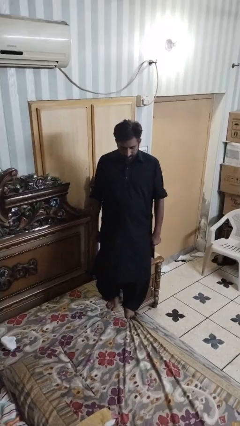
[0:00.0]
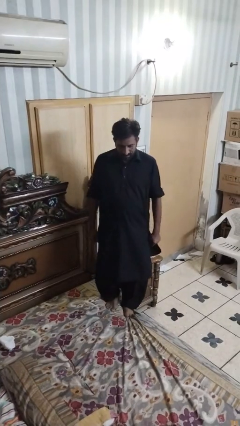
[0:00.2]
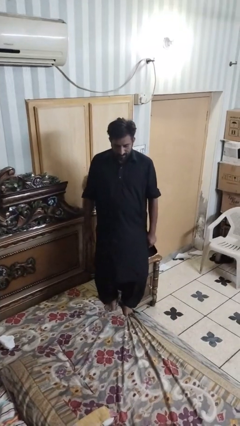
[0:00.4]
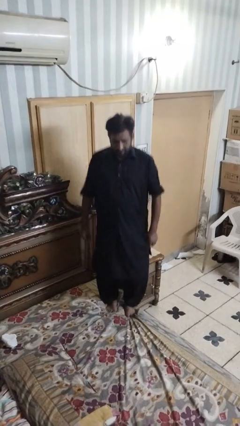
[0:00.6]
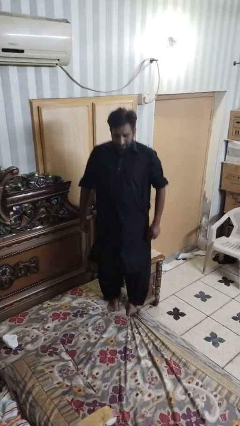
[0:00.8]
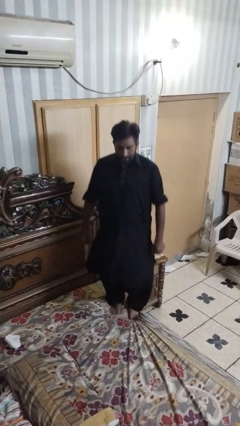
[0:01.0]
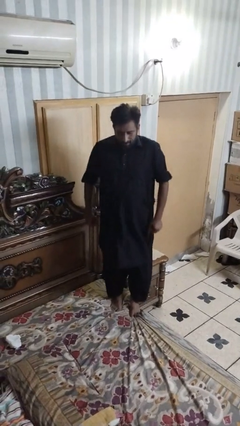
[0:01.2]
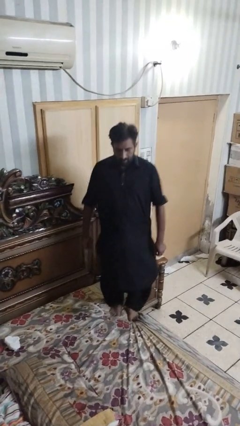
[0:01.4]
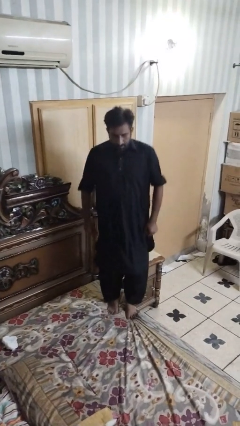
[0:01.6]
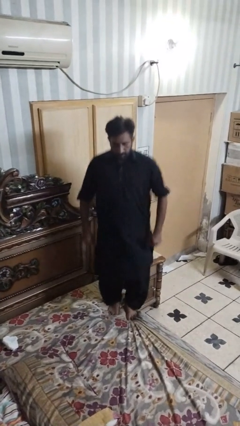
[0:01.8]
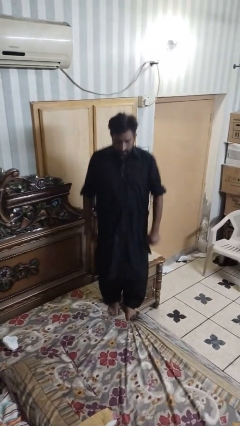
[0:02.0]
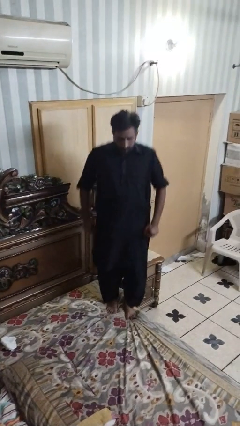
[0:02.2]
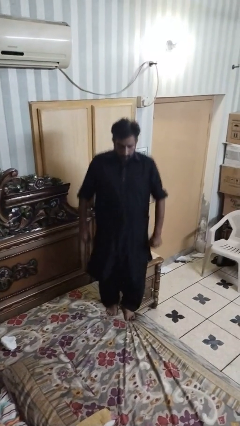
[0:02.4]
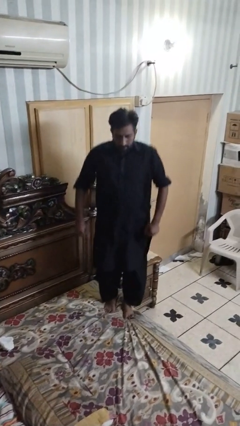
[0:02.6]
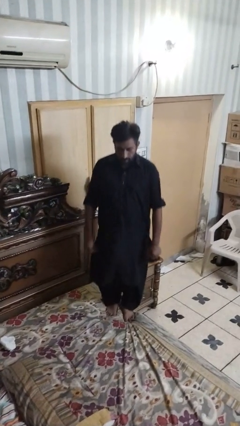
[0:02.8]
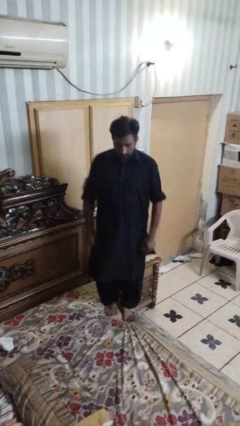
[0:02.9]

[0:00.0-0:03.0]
person jumps on bed

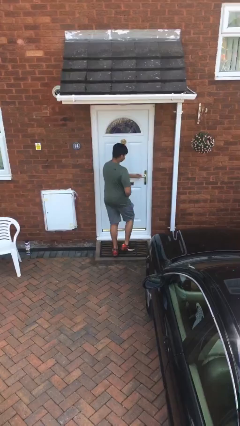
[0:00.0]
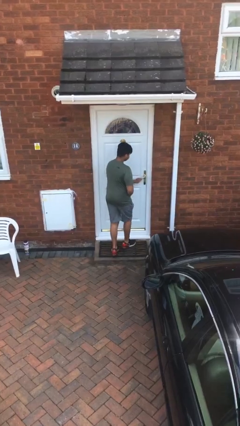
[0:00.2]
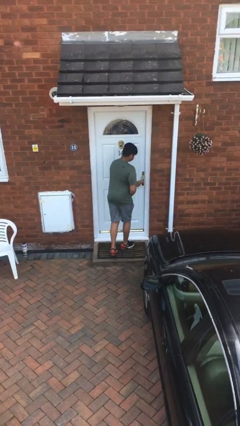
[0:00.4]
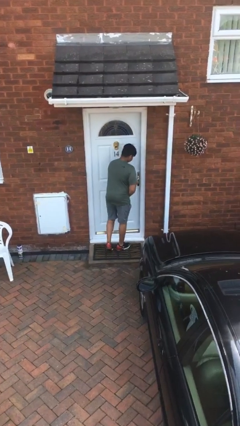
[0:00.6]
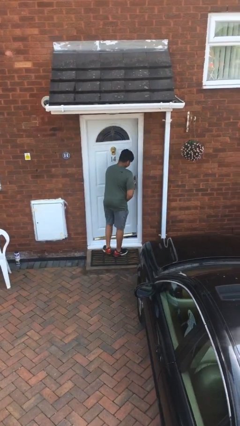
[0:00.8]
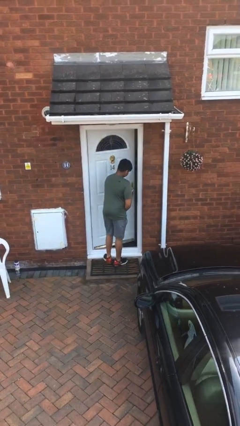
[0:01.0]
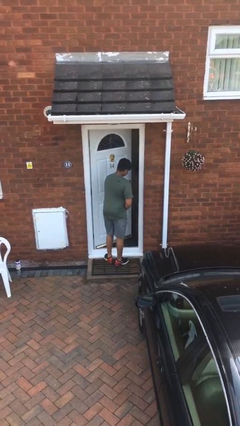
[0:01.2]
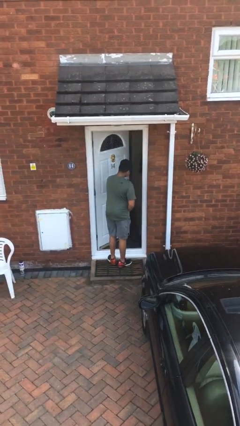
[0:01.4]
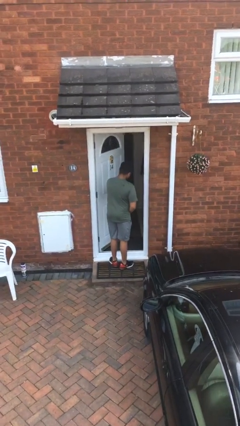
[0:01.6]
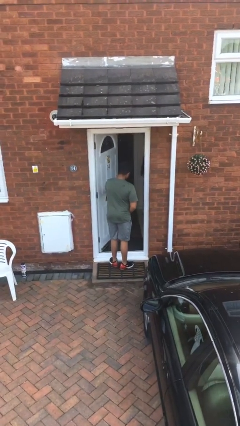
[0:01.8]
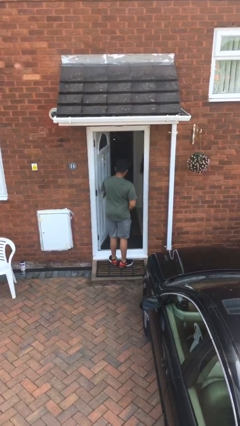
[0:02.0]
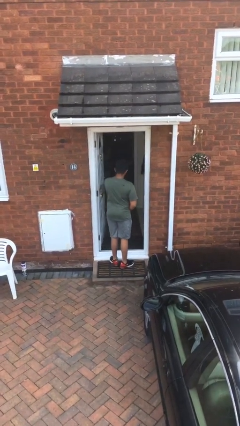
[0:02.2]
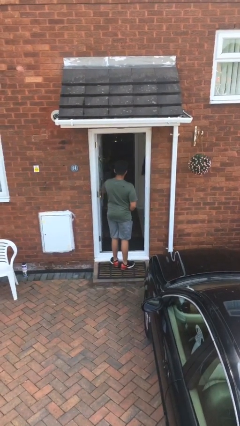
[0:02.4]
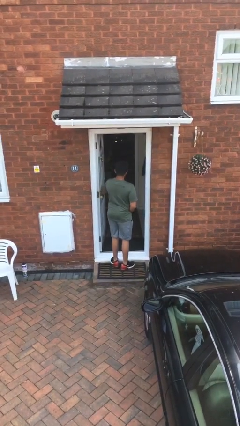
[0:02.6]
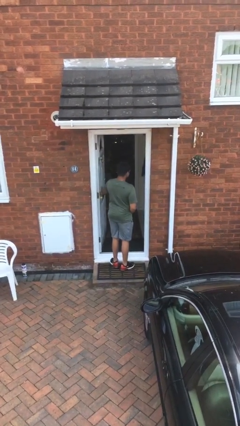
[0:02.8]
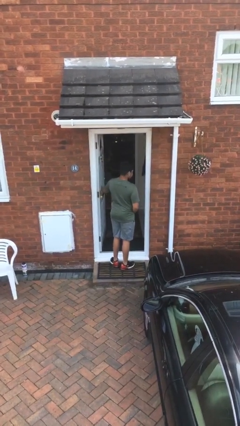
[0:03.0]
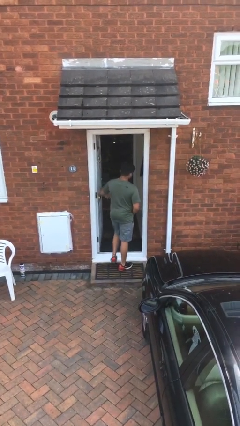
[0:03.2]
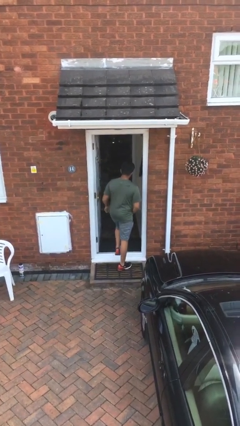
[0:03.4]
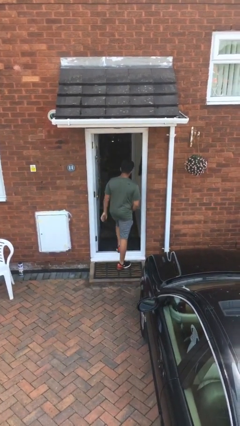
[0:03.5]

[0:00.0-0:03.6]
person opens facility door

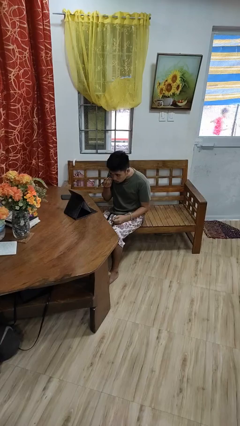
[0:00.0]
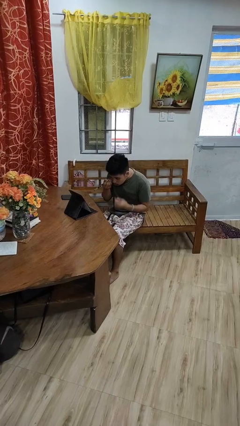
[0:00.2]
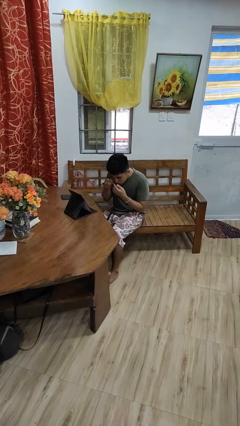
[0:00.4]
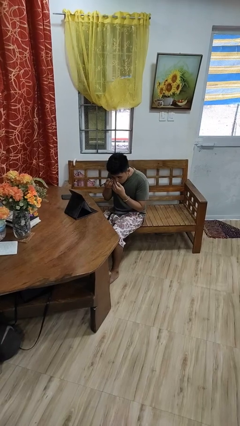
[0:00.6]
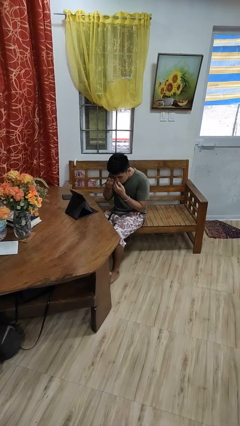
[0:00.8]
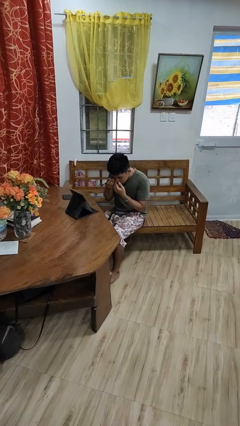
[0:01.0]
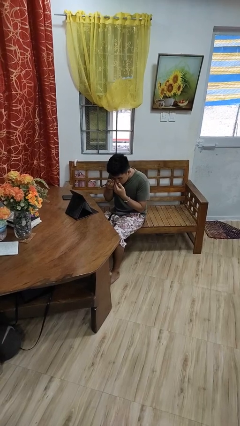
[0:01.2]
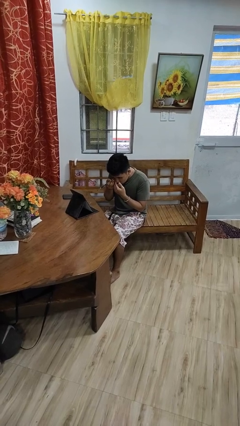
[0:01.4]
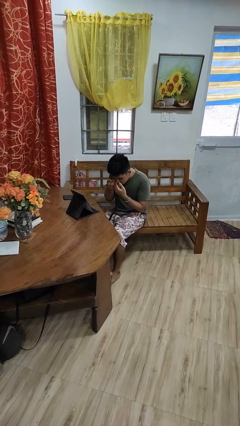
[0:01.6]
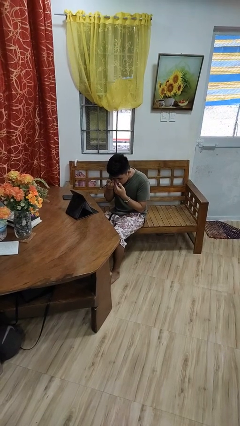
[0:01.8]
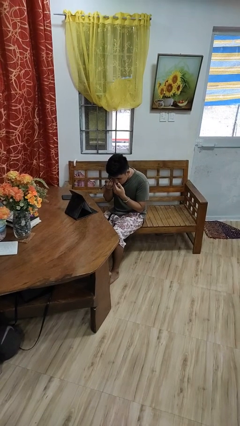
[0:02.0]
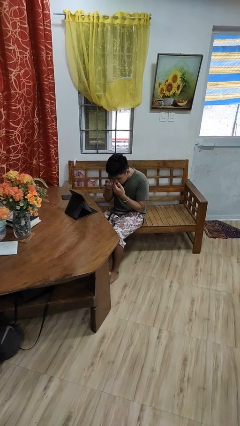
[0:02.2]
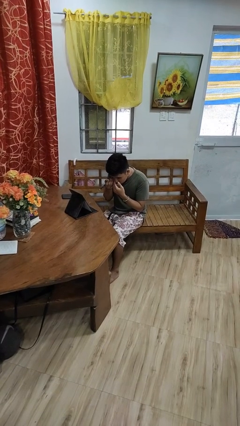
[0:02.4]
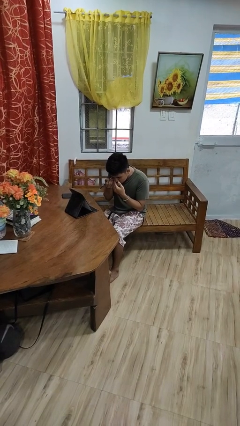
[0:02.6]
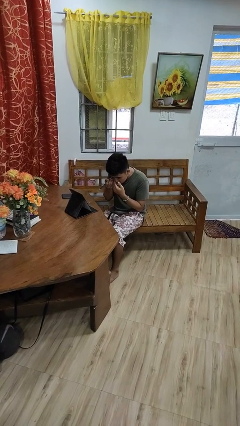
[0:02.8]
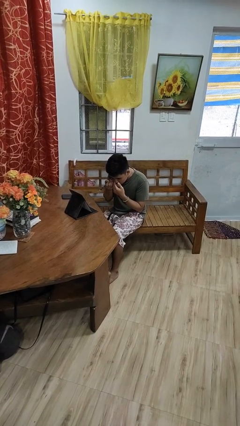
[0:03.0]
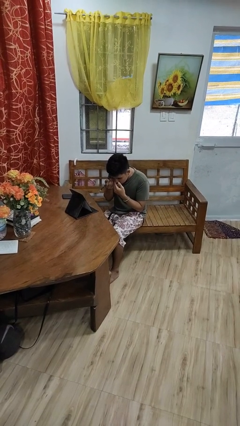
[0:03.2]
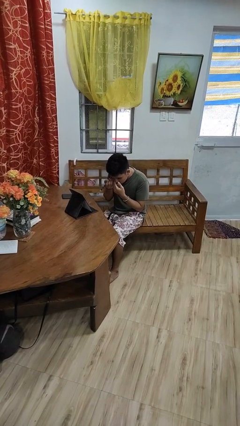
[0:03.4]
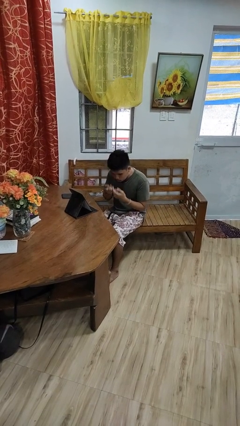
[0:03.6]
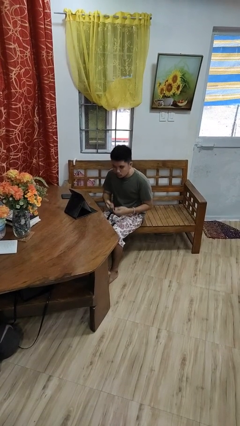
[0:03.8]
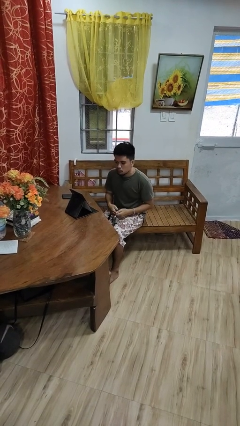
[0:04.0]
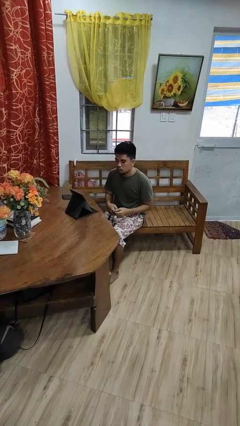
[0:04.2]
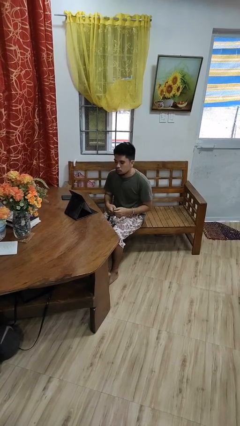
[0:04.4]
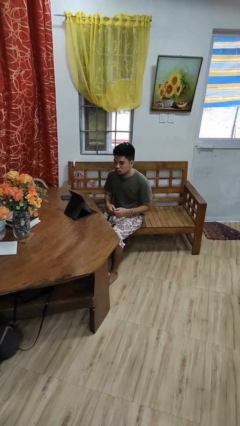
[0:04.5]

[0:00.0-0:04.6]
person applies eye makeup

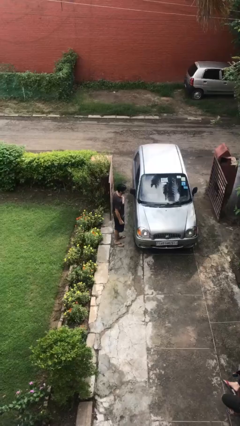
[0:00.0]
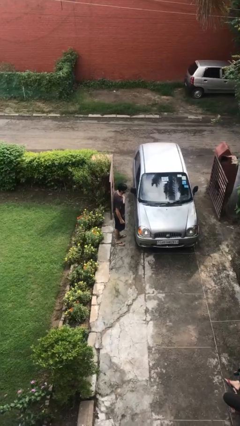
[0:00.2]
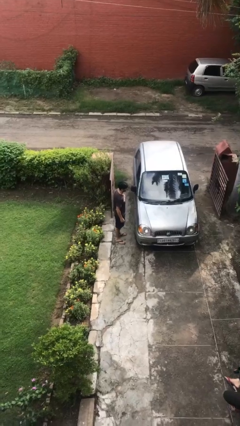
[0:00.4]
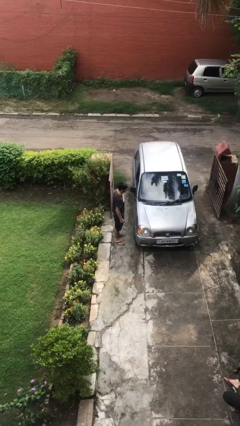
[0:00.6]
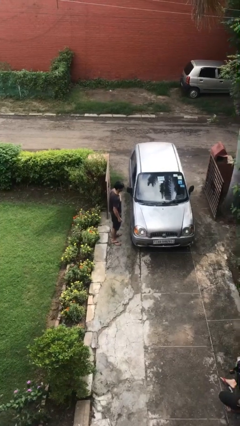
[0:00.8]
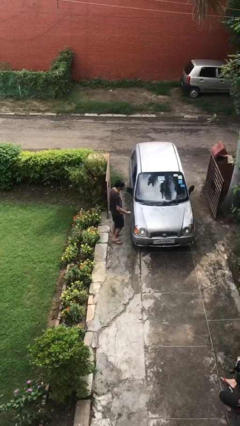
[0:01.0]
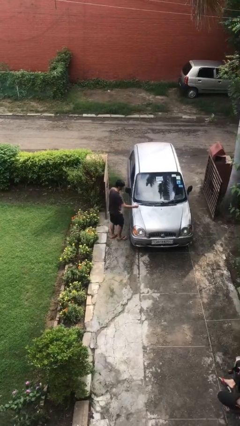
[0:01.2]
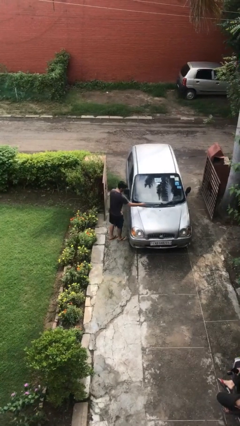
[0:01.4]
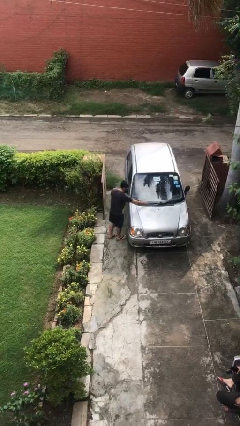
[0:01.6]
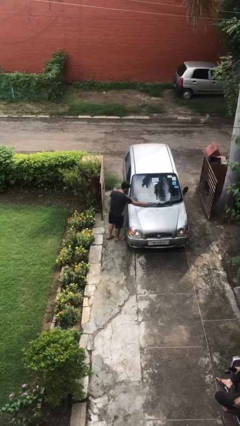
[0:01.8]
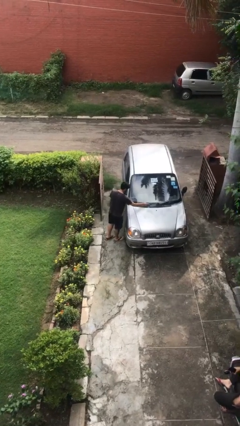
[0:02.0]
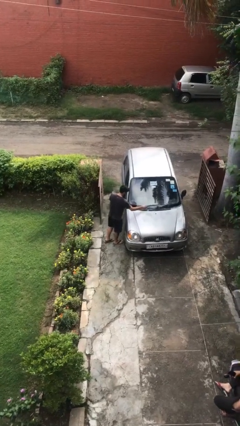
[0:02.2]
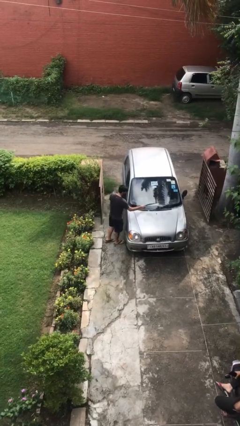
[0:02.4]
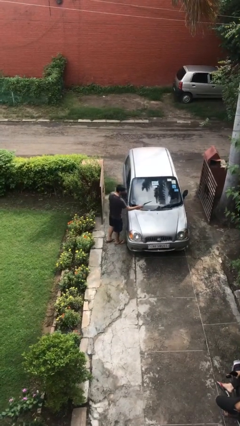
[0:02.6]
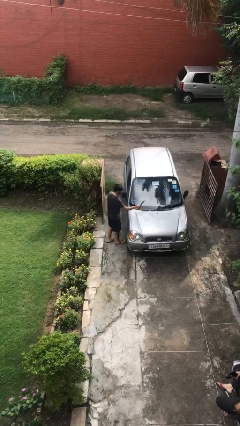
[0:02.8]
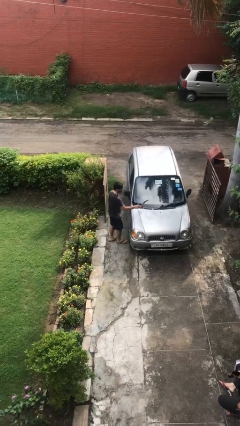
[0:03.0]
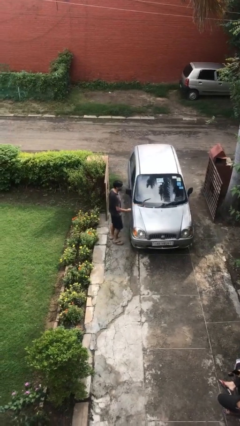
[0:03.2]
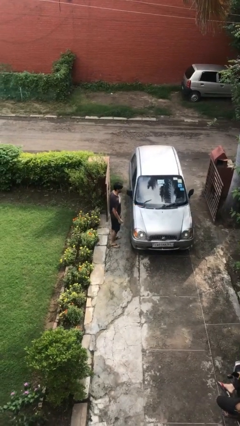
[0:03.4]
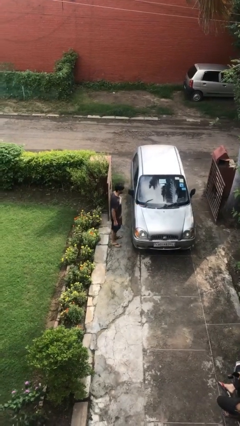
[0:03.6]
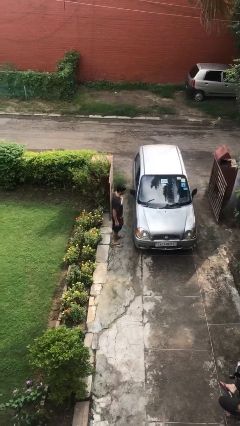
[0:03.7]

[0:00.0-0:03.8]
person flips up car wipers

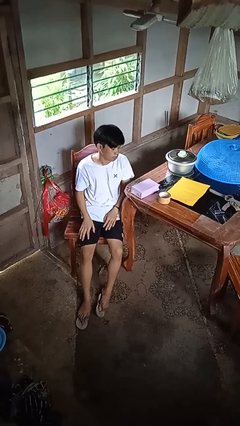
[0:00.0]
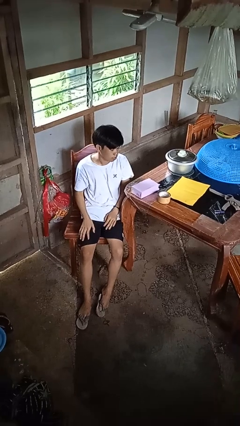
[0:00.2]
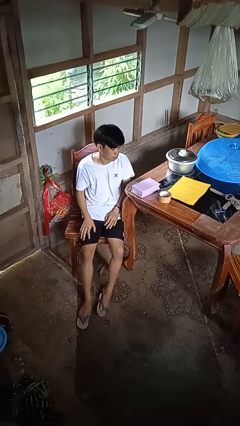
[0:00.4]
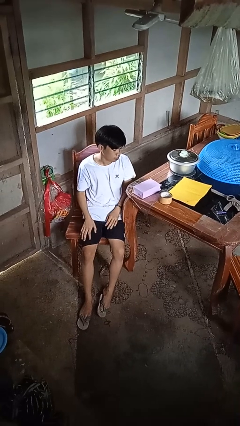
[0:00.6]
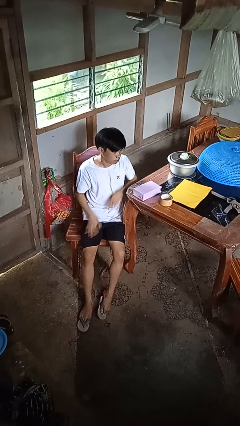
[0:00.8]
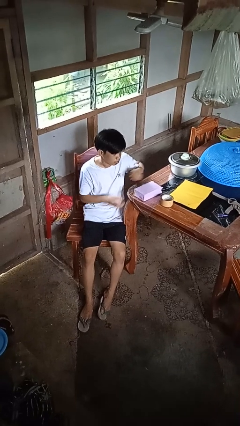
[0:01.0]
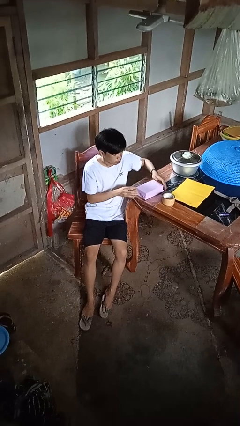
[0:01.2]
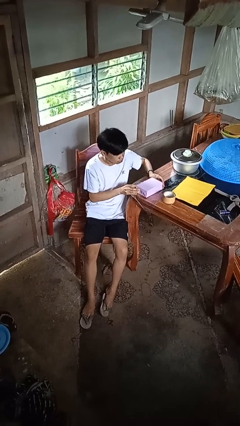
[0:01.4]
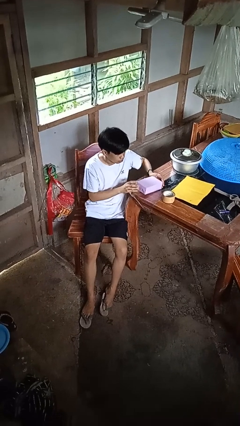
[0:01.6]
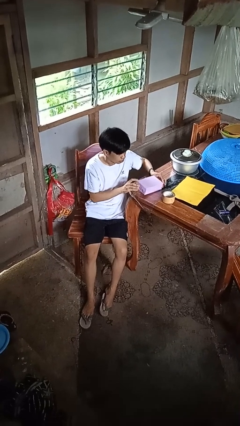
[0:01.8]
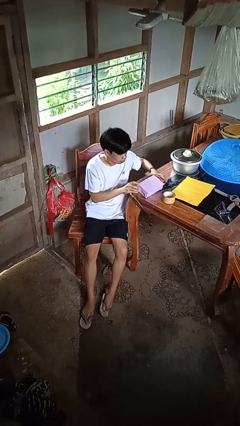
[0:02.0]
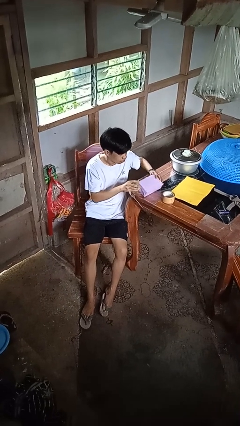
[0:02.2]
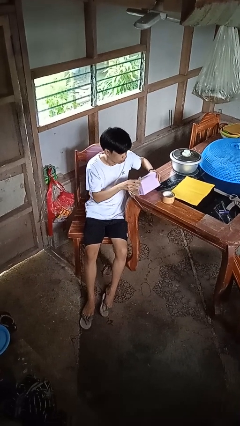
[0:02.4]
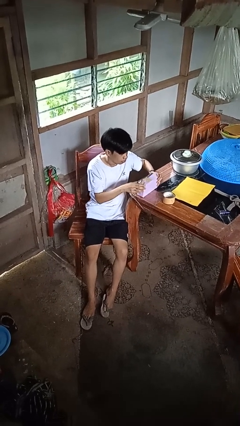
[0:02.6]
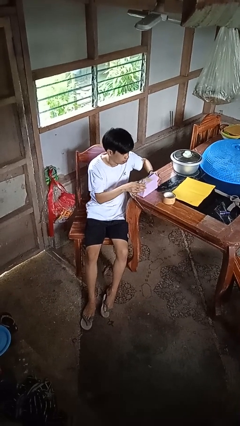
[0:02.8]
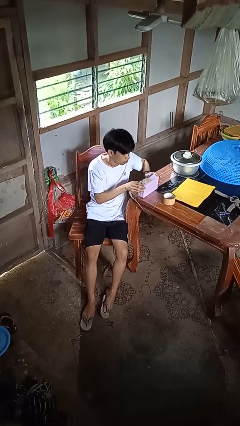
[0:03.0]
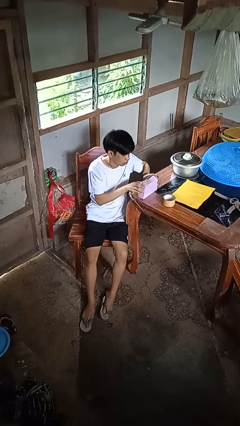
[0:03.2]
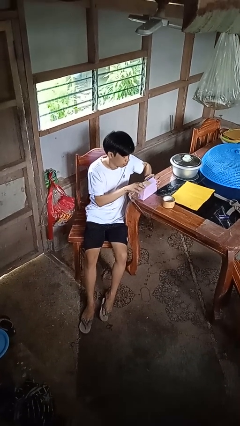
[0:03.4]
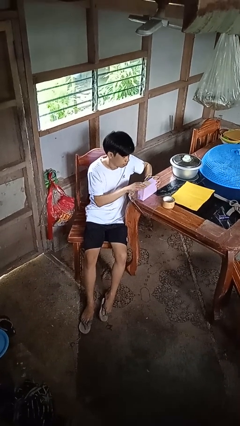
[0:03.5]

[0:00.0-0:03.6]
person wraps box
